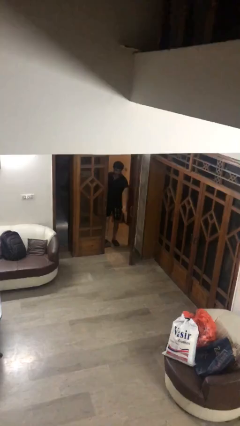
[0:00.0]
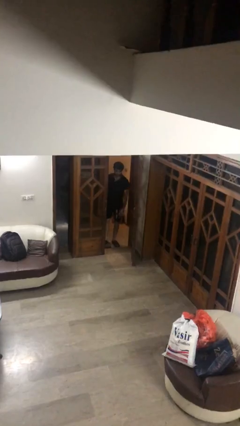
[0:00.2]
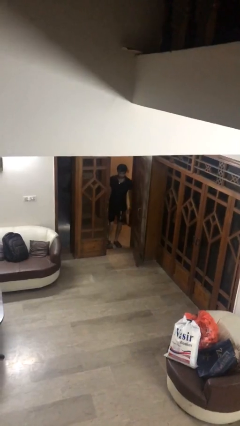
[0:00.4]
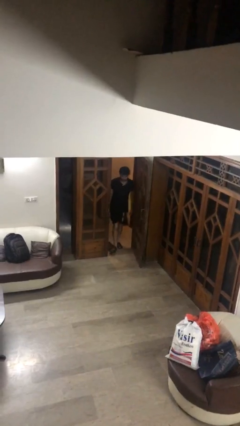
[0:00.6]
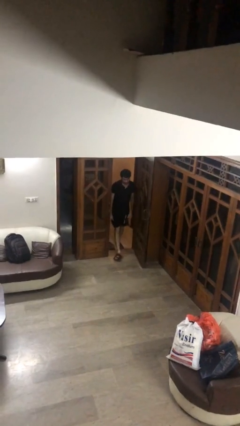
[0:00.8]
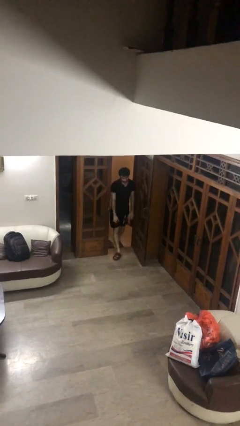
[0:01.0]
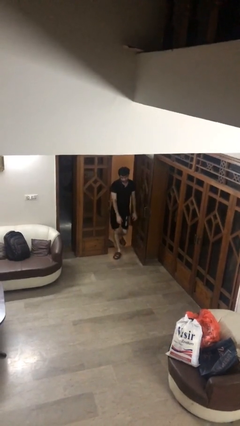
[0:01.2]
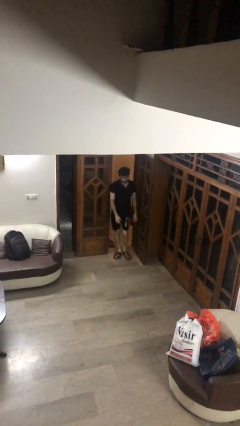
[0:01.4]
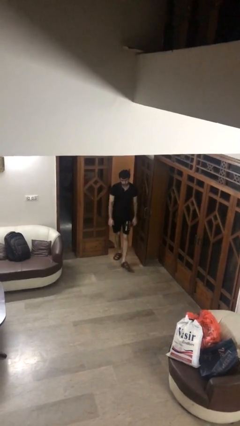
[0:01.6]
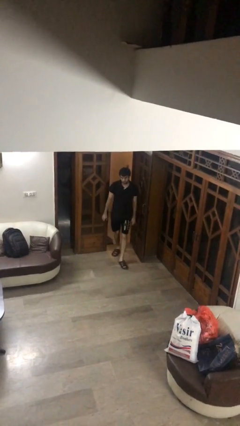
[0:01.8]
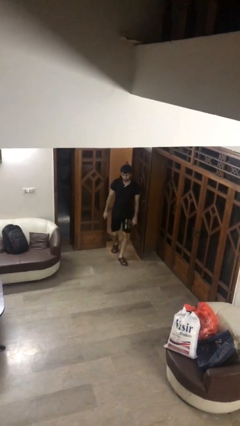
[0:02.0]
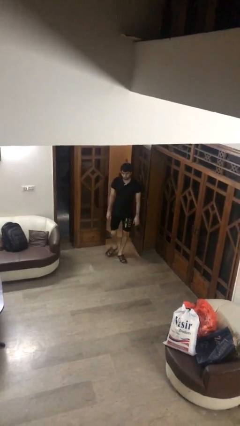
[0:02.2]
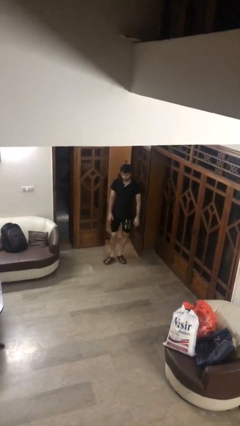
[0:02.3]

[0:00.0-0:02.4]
person enters scene through structure

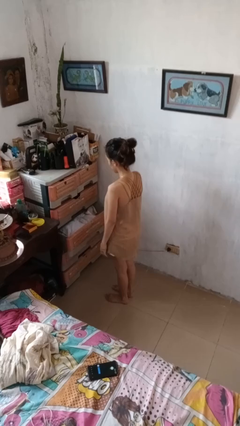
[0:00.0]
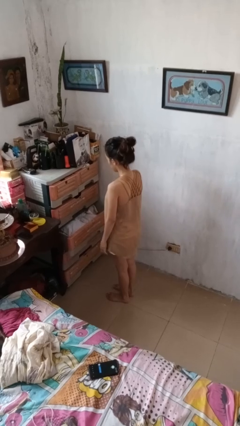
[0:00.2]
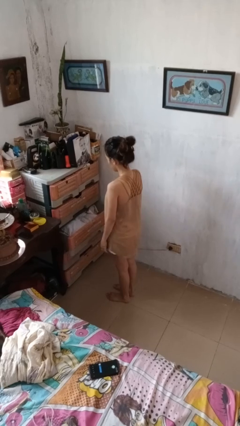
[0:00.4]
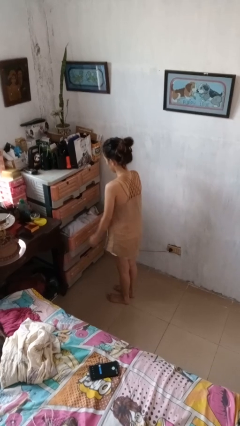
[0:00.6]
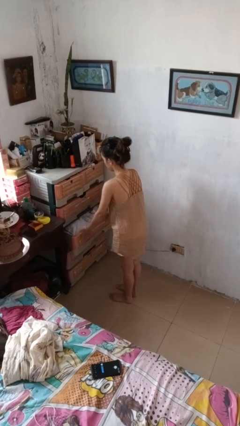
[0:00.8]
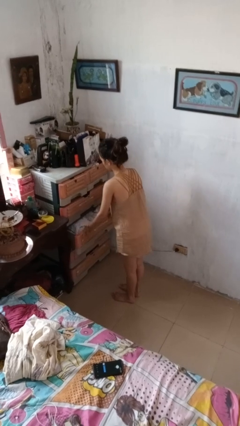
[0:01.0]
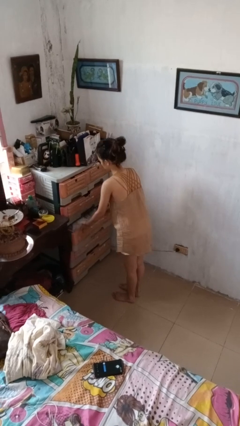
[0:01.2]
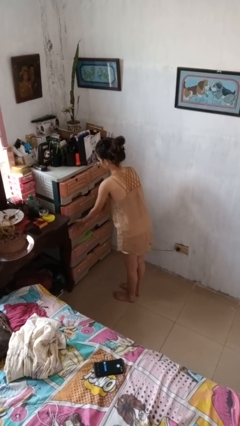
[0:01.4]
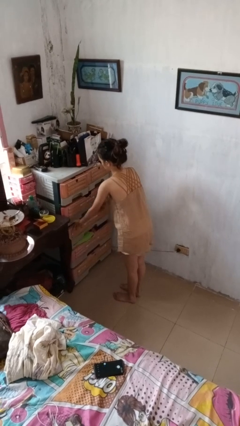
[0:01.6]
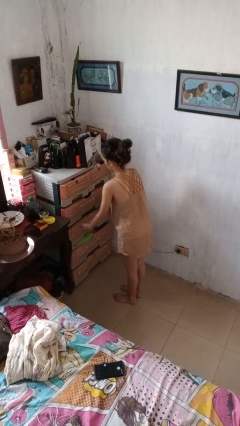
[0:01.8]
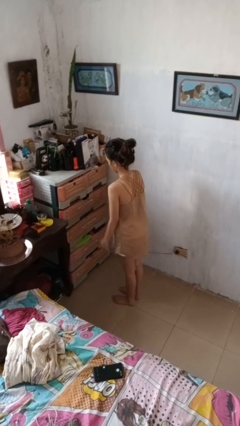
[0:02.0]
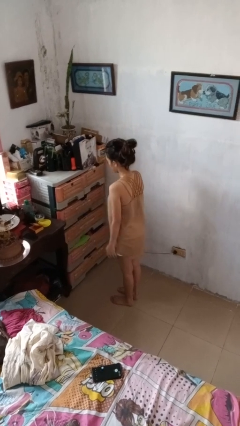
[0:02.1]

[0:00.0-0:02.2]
person closes dresser drawer

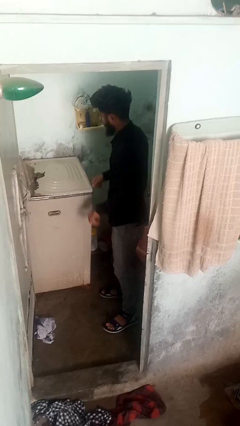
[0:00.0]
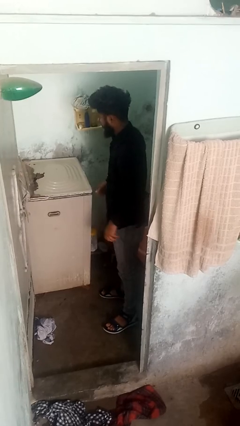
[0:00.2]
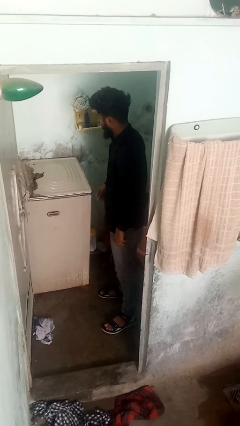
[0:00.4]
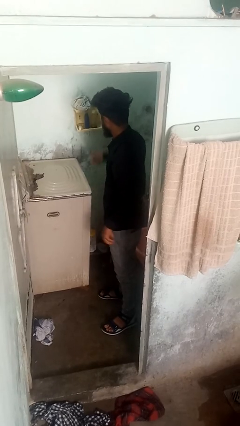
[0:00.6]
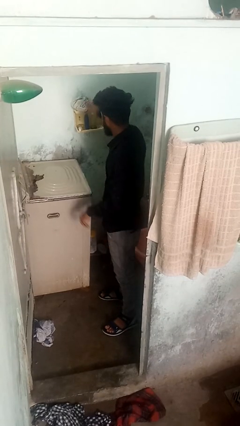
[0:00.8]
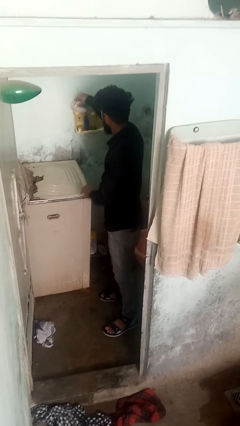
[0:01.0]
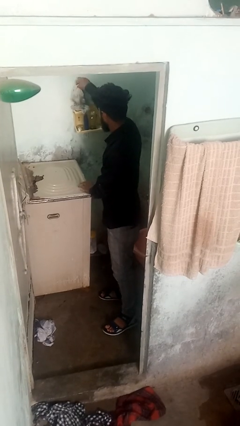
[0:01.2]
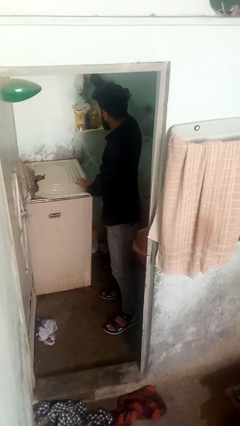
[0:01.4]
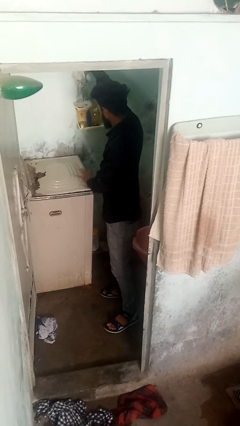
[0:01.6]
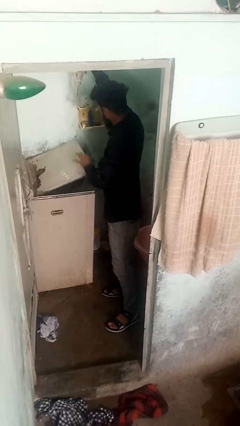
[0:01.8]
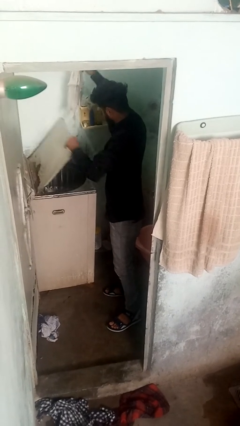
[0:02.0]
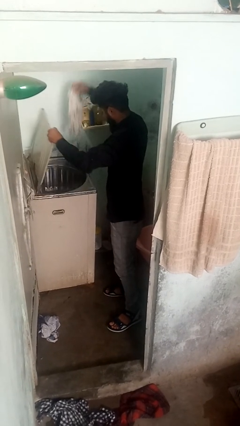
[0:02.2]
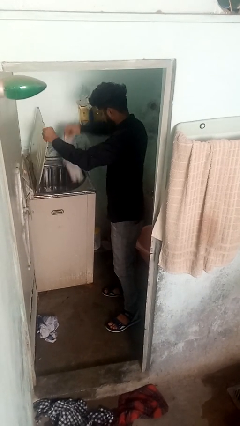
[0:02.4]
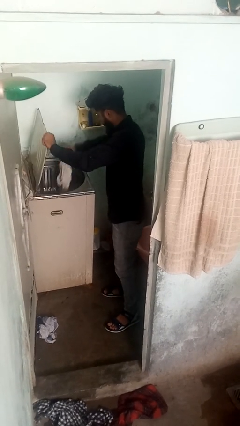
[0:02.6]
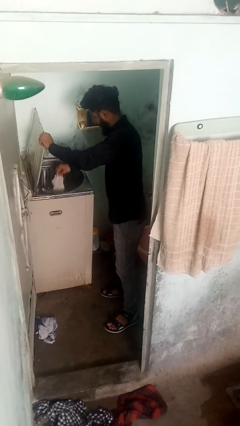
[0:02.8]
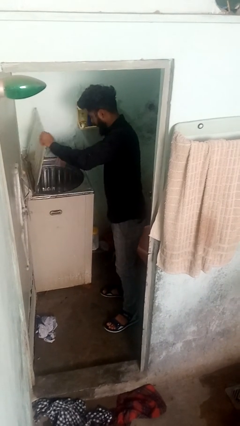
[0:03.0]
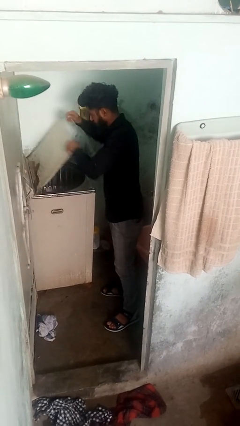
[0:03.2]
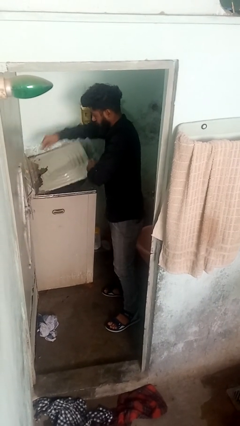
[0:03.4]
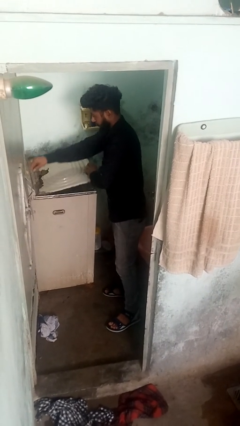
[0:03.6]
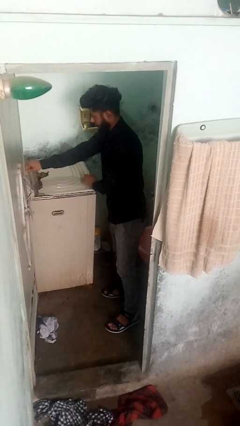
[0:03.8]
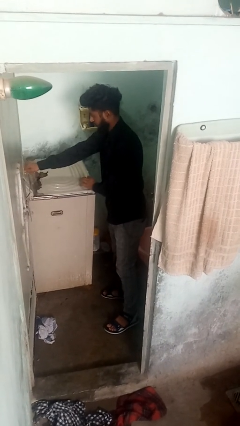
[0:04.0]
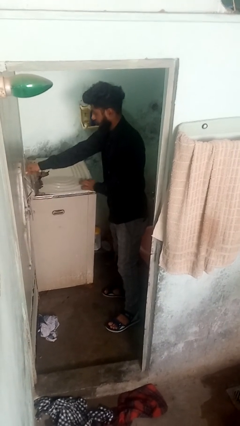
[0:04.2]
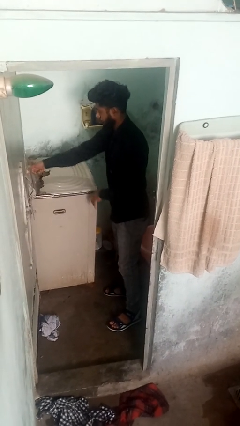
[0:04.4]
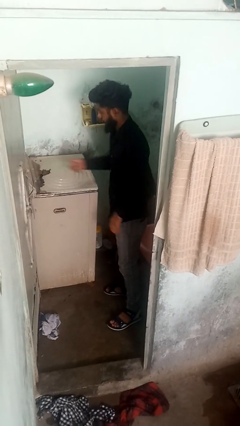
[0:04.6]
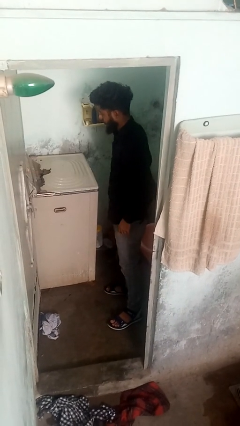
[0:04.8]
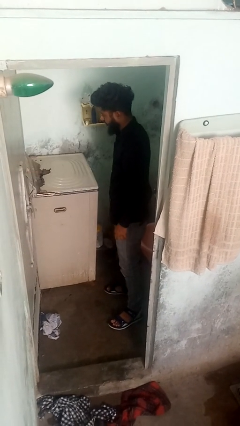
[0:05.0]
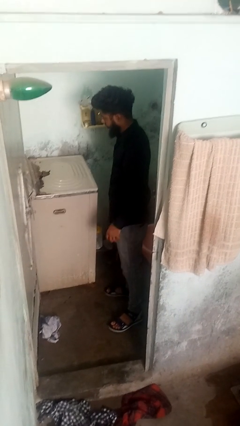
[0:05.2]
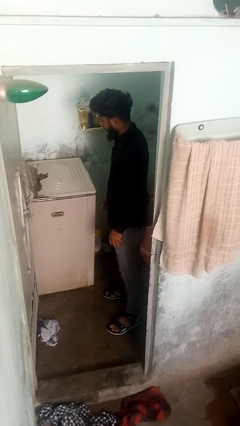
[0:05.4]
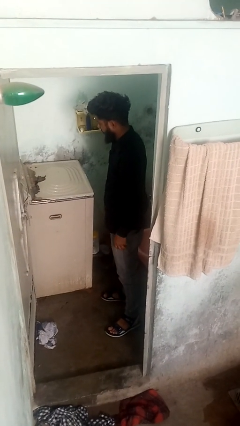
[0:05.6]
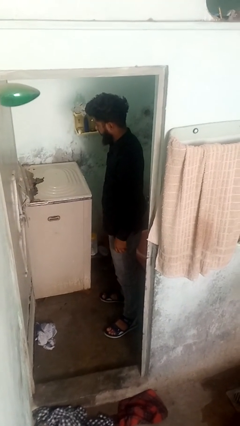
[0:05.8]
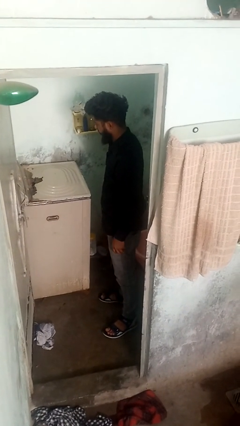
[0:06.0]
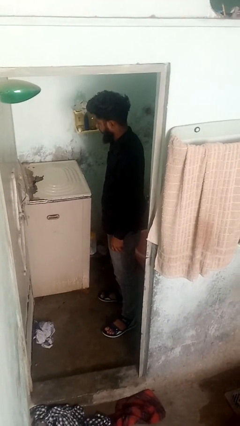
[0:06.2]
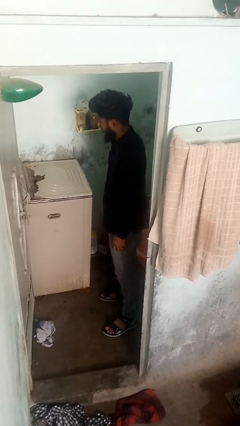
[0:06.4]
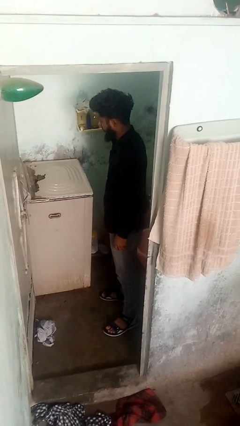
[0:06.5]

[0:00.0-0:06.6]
person loads clotheswasher

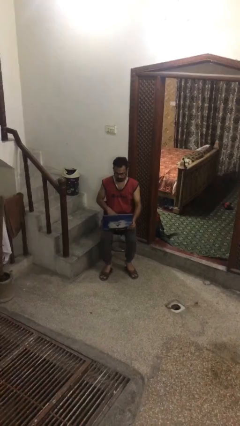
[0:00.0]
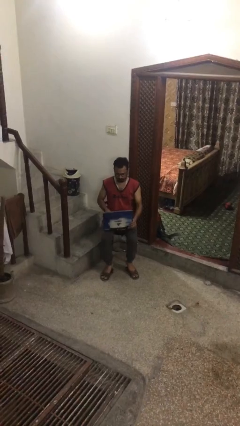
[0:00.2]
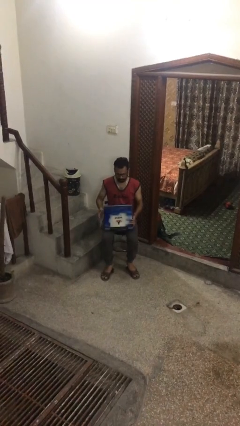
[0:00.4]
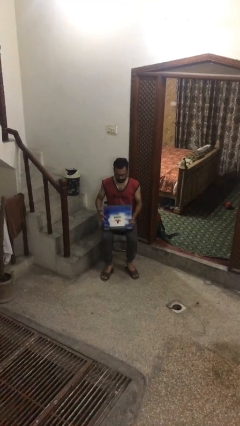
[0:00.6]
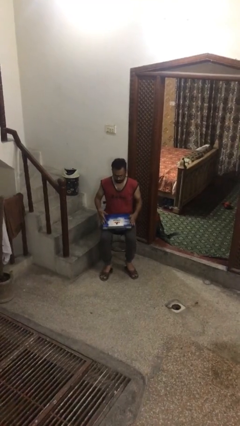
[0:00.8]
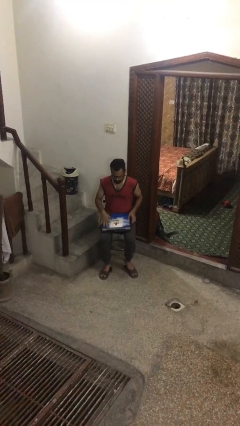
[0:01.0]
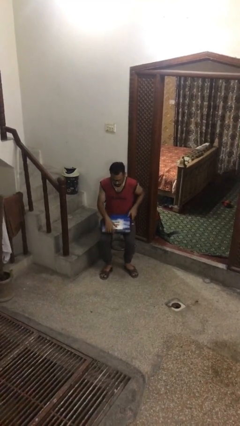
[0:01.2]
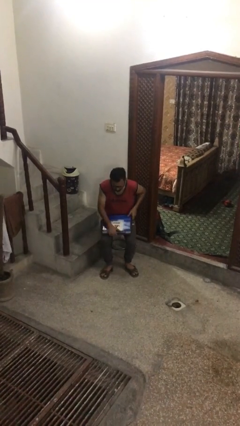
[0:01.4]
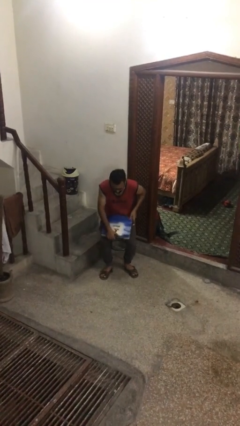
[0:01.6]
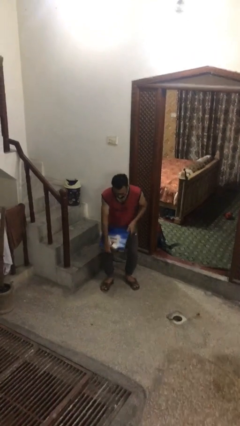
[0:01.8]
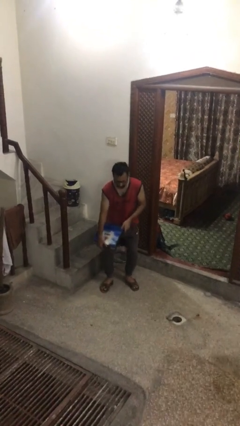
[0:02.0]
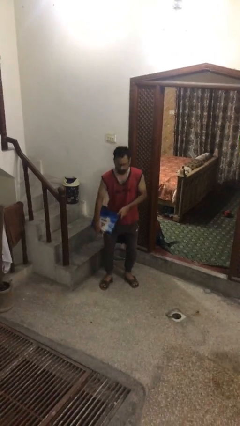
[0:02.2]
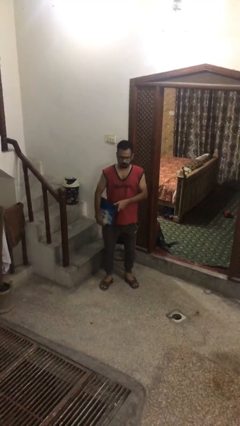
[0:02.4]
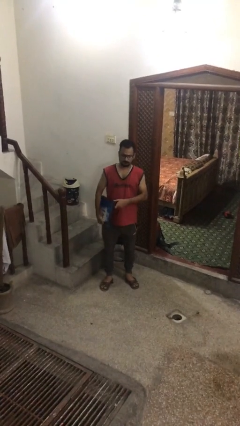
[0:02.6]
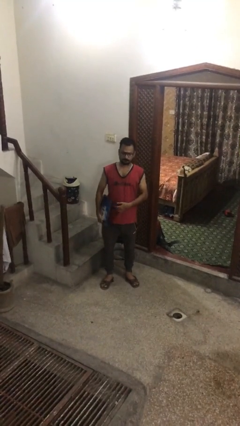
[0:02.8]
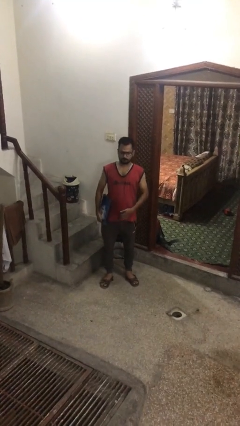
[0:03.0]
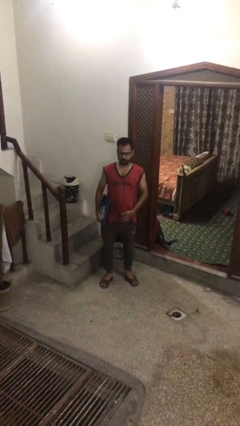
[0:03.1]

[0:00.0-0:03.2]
person stands up

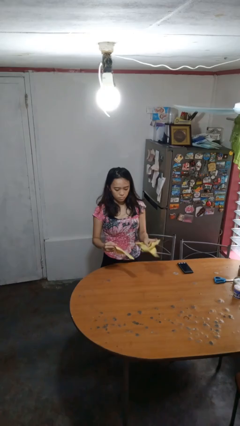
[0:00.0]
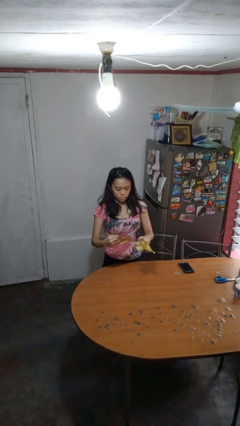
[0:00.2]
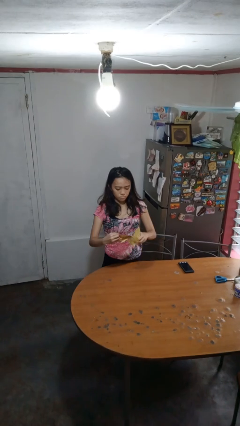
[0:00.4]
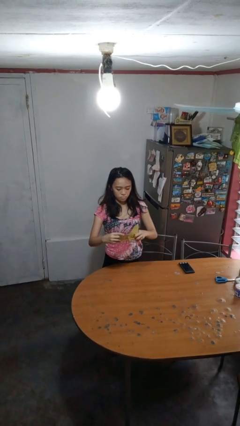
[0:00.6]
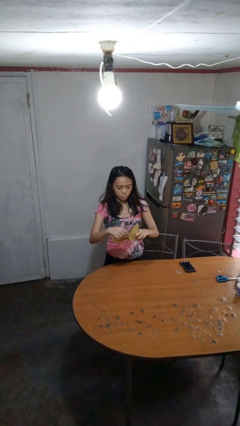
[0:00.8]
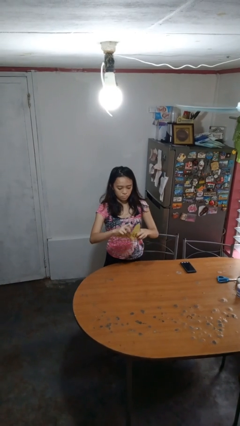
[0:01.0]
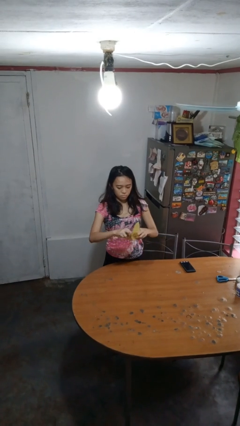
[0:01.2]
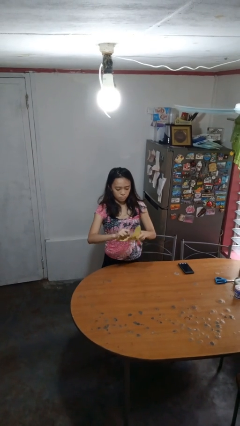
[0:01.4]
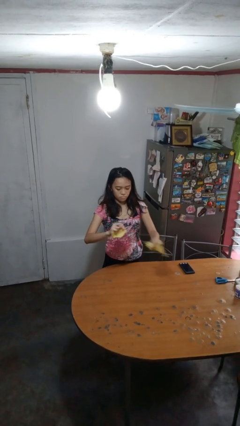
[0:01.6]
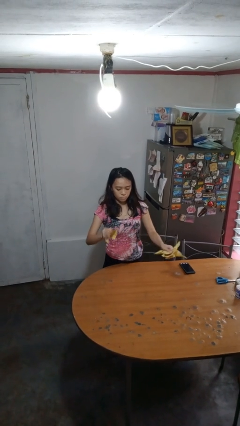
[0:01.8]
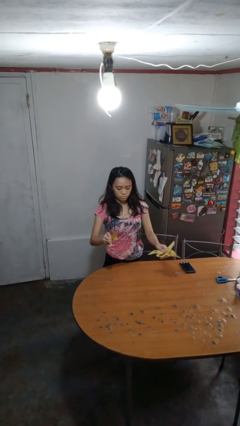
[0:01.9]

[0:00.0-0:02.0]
person tears paper

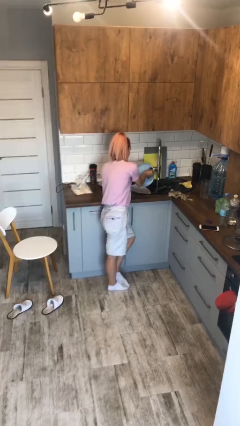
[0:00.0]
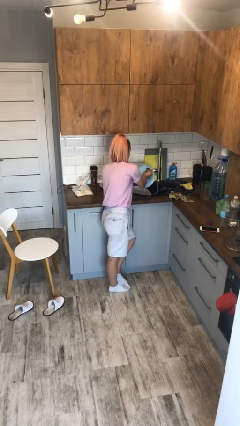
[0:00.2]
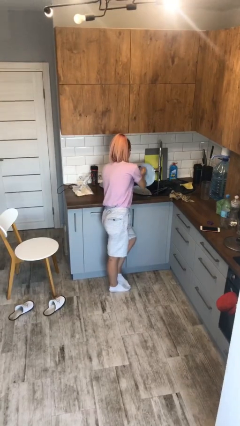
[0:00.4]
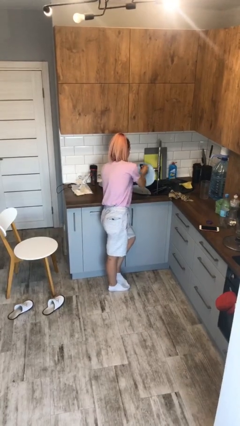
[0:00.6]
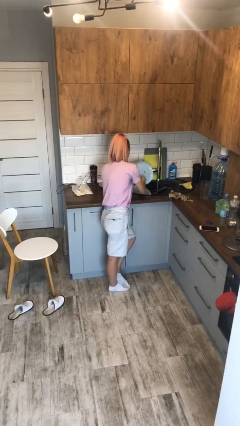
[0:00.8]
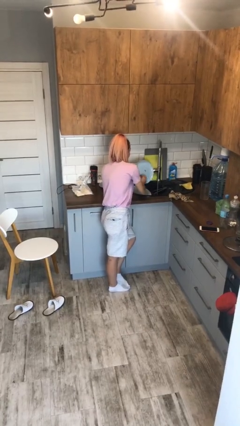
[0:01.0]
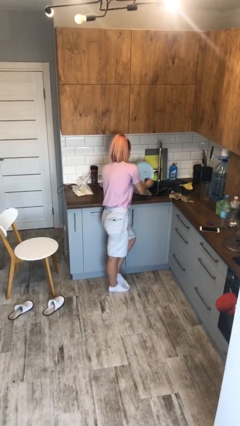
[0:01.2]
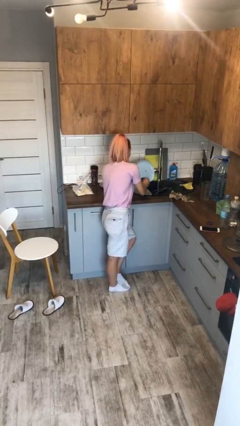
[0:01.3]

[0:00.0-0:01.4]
person washes dish
